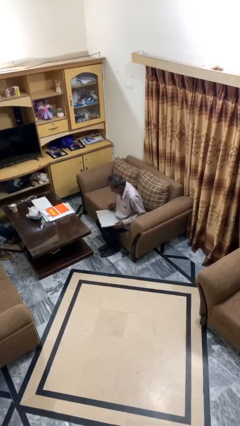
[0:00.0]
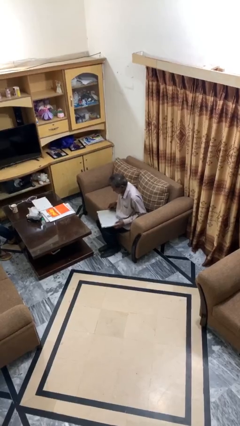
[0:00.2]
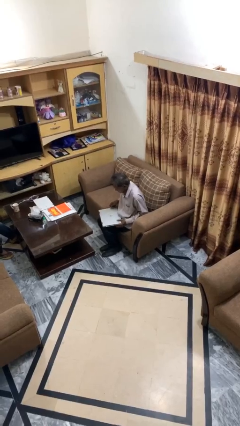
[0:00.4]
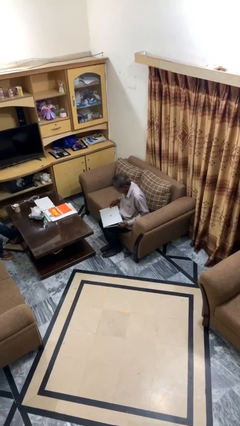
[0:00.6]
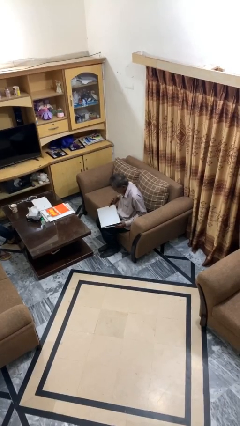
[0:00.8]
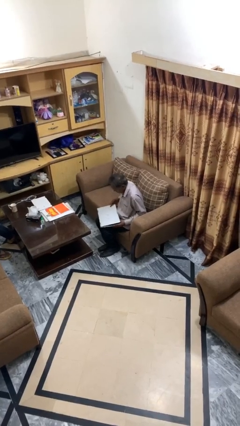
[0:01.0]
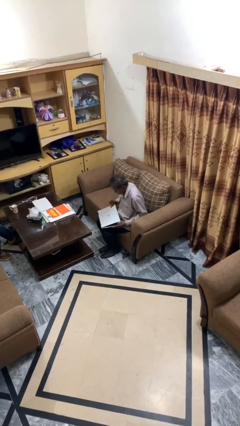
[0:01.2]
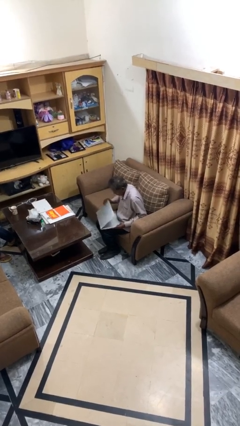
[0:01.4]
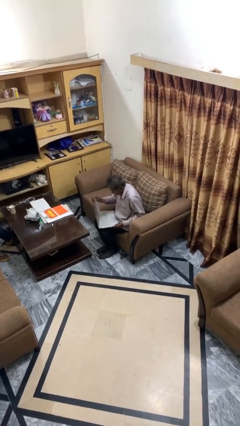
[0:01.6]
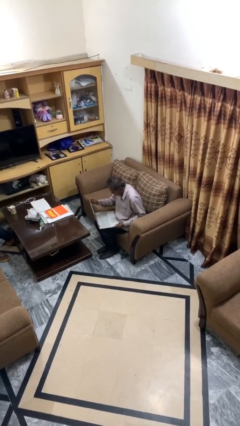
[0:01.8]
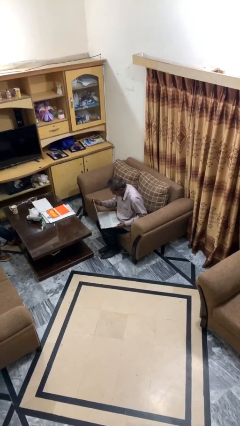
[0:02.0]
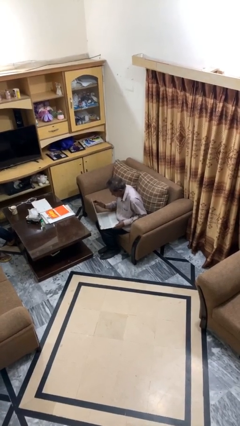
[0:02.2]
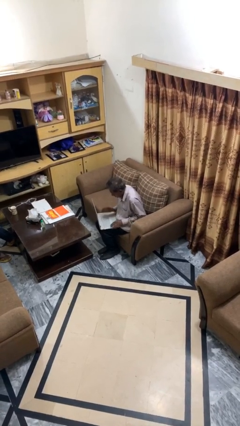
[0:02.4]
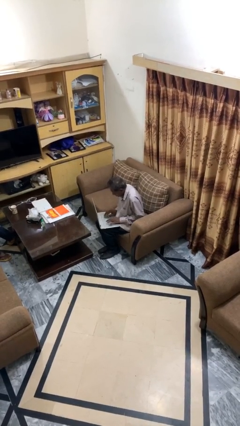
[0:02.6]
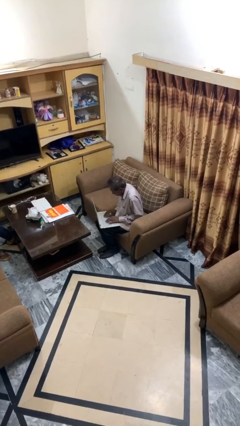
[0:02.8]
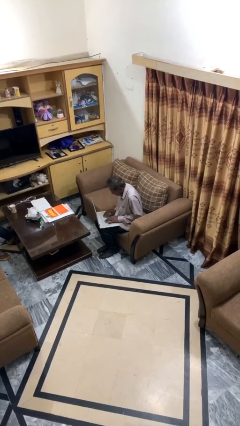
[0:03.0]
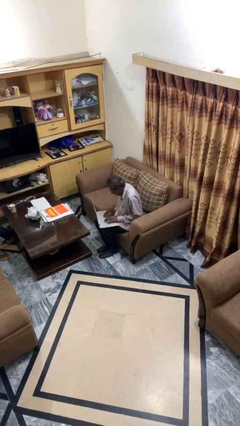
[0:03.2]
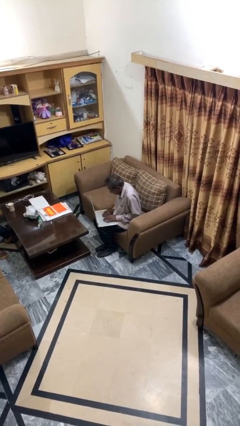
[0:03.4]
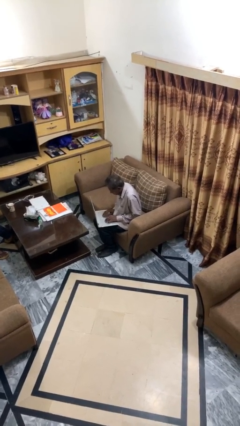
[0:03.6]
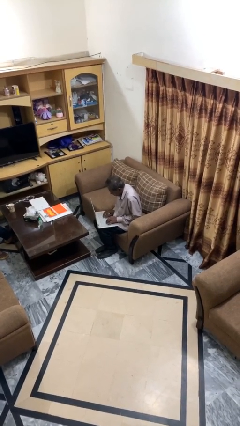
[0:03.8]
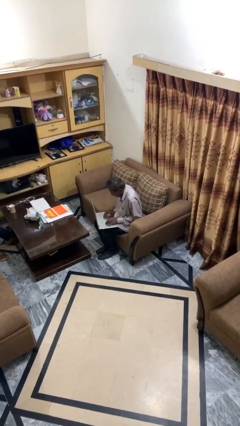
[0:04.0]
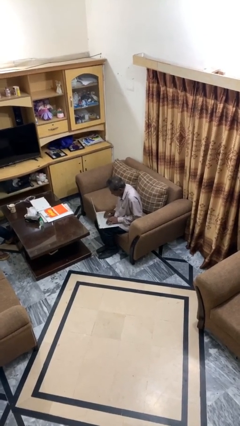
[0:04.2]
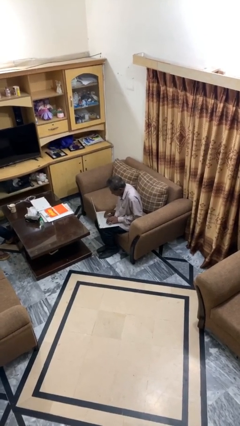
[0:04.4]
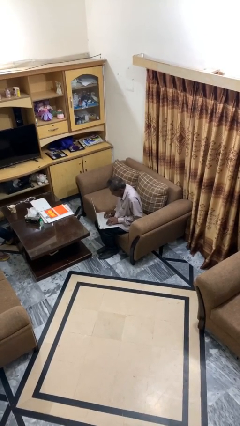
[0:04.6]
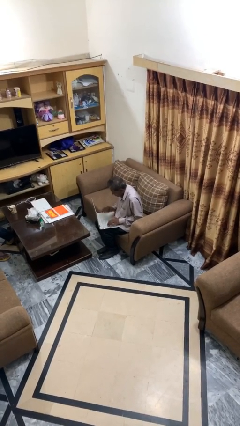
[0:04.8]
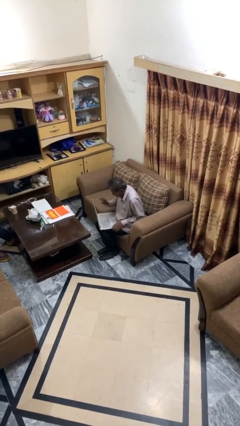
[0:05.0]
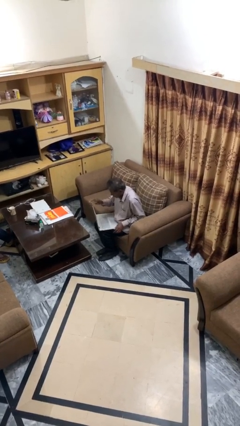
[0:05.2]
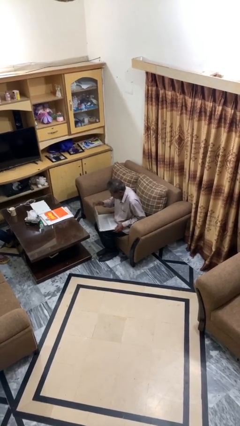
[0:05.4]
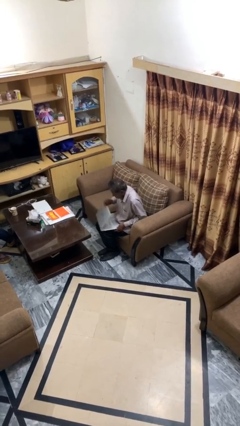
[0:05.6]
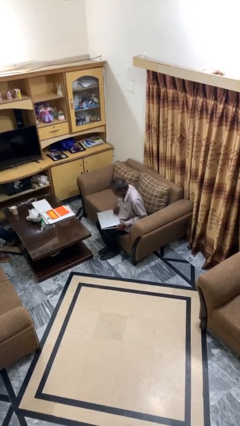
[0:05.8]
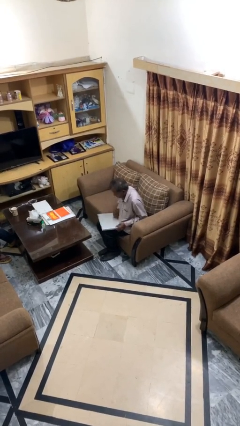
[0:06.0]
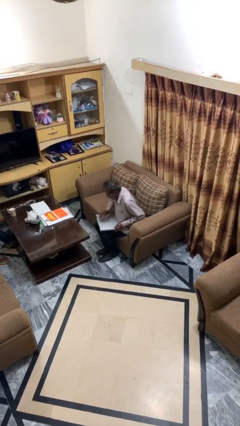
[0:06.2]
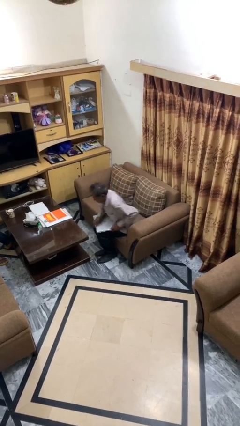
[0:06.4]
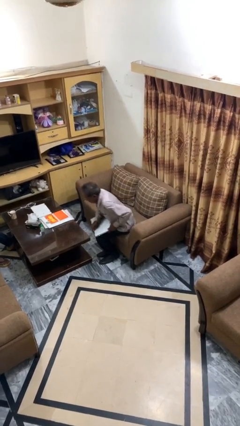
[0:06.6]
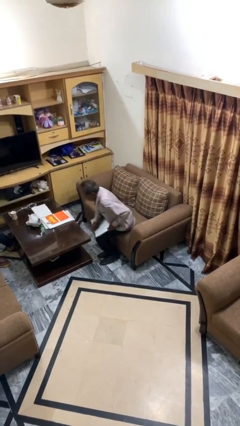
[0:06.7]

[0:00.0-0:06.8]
person interacts with laptop

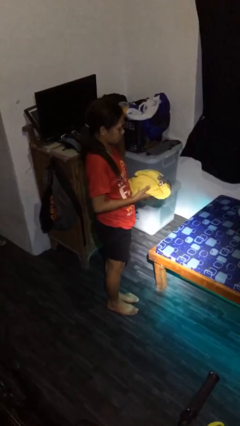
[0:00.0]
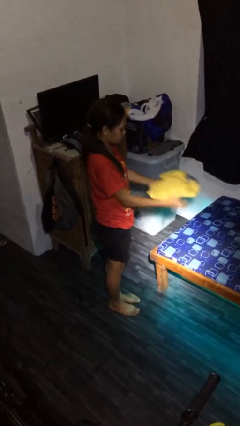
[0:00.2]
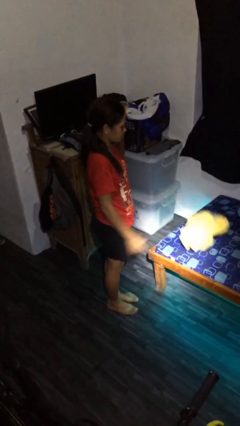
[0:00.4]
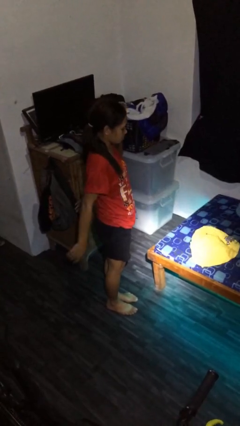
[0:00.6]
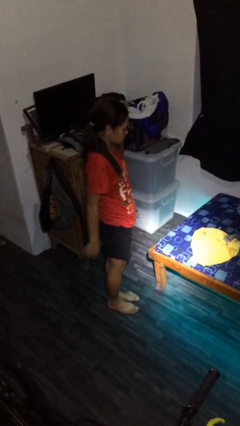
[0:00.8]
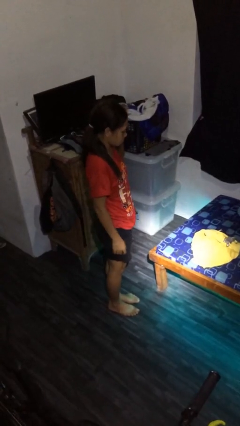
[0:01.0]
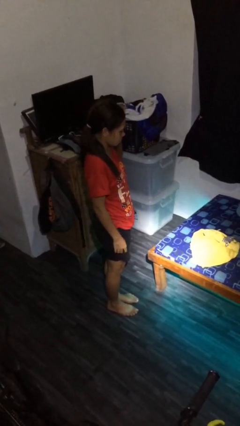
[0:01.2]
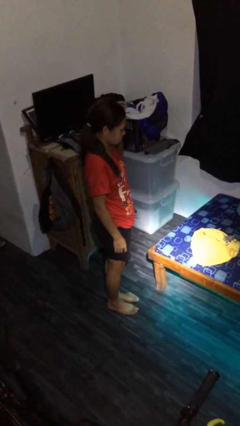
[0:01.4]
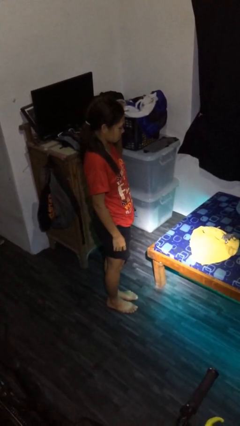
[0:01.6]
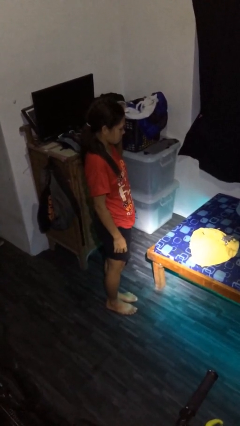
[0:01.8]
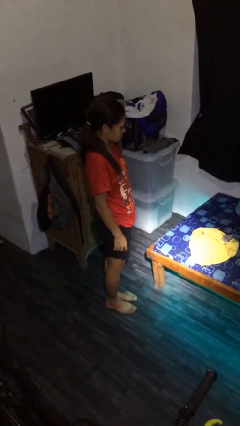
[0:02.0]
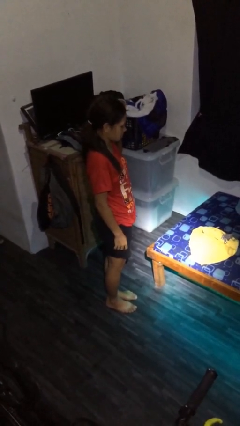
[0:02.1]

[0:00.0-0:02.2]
person throws object on bed

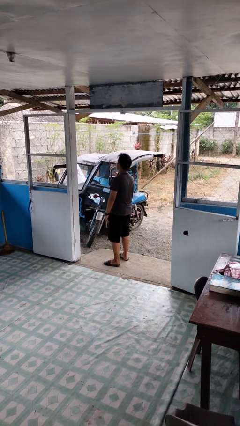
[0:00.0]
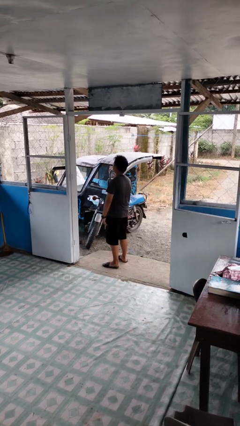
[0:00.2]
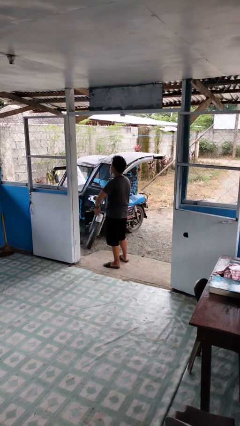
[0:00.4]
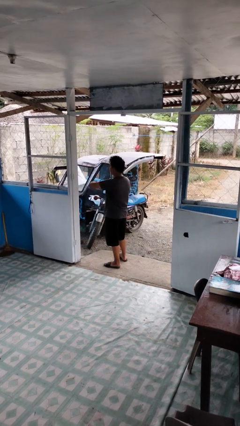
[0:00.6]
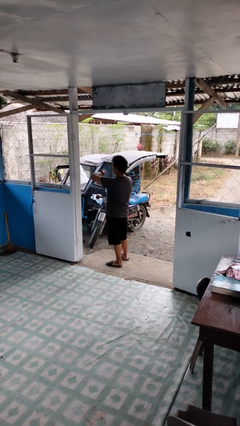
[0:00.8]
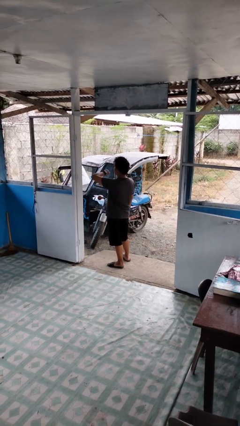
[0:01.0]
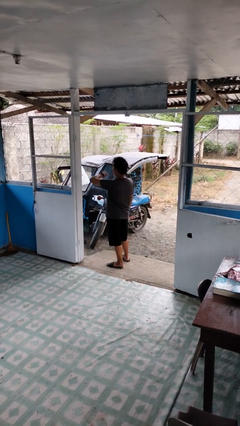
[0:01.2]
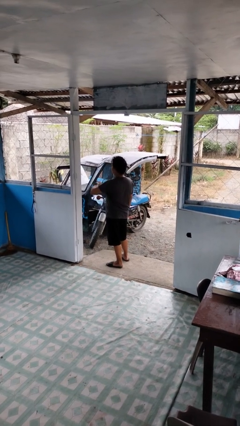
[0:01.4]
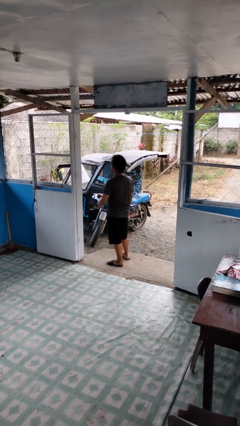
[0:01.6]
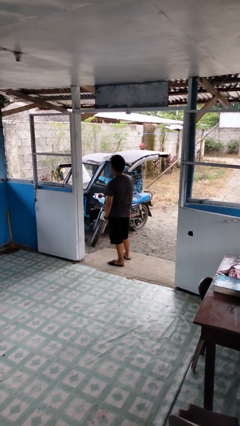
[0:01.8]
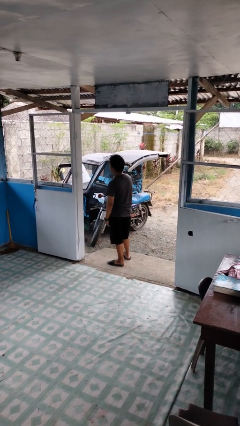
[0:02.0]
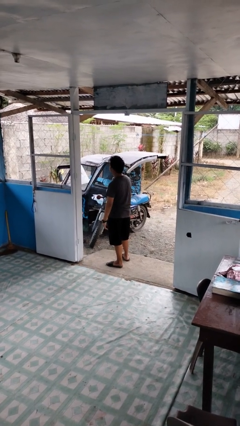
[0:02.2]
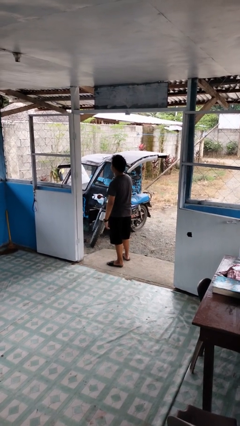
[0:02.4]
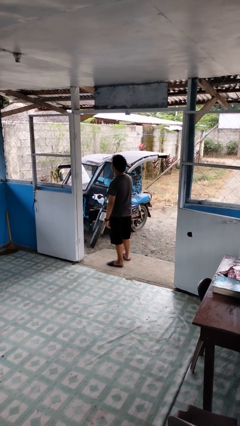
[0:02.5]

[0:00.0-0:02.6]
person looks at wristwatch

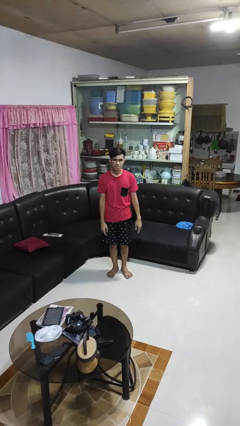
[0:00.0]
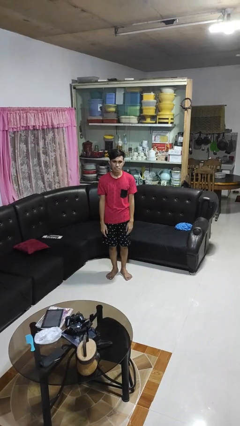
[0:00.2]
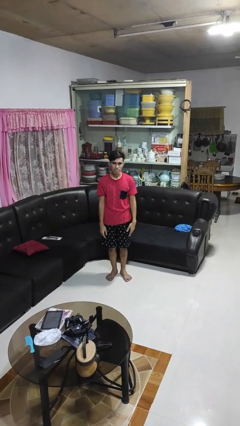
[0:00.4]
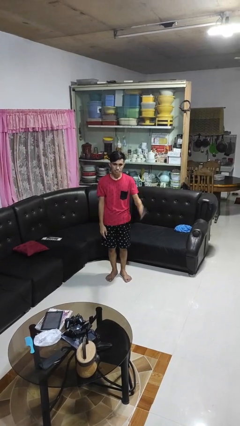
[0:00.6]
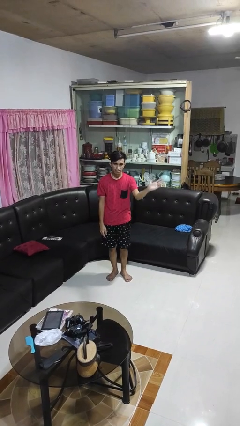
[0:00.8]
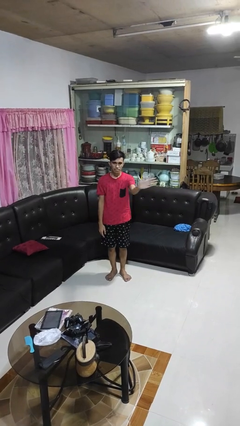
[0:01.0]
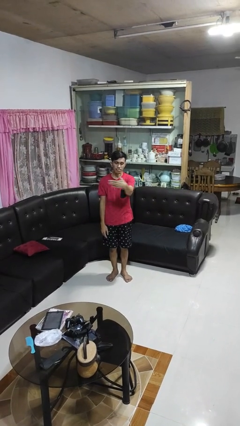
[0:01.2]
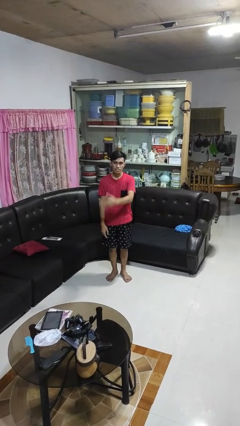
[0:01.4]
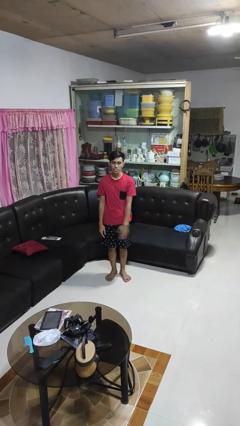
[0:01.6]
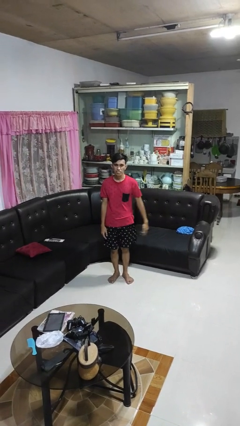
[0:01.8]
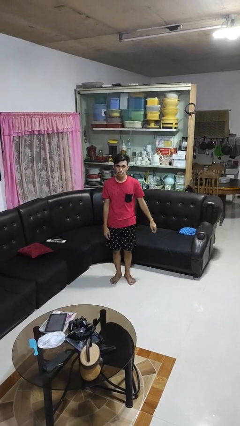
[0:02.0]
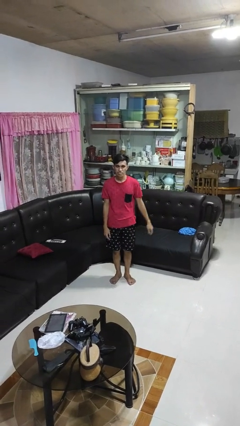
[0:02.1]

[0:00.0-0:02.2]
person gestures swipe right

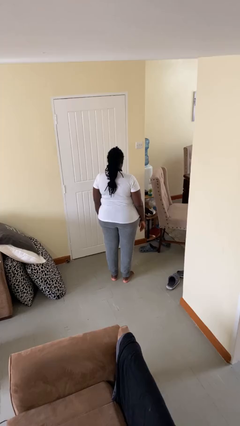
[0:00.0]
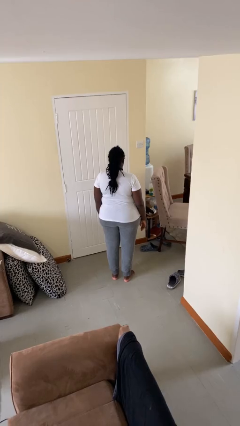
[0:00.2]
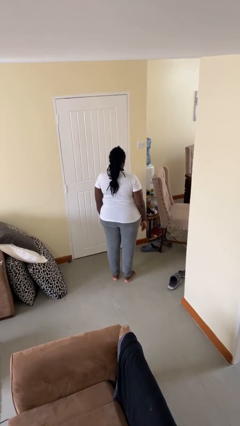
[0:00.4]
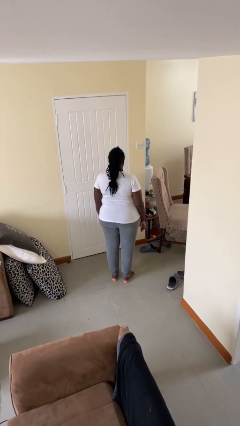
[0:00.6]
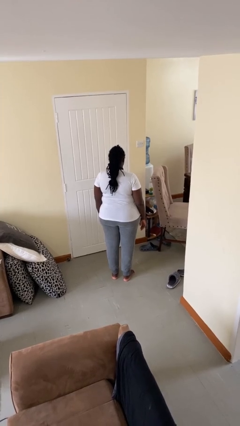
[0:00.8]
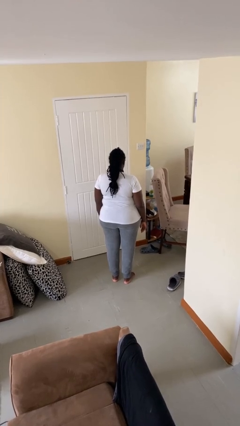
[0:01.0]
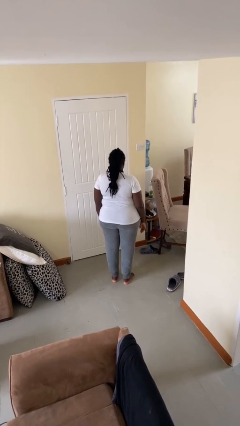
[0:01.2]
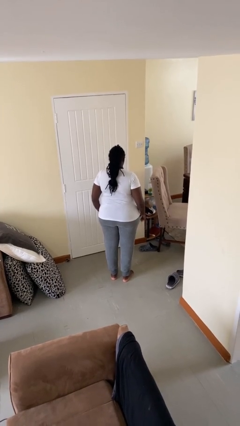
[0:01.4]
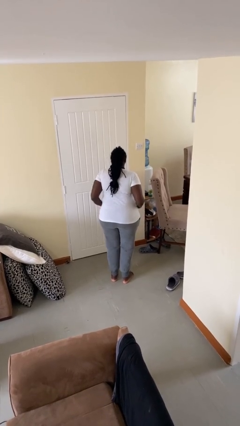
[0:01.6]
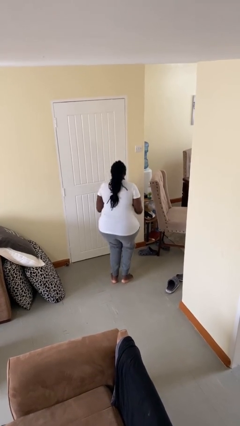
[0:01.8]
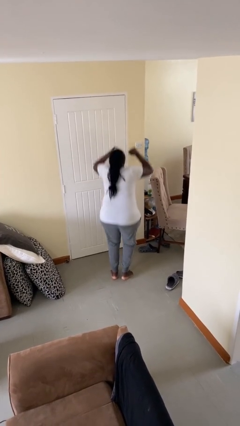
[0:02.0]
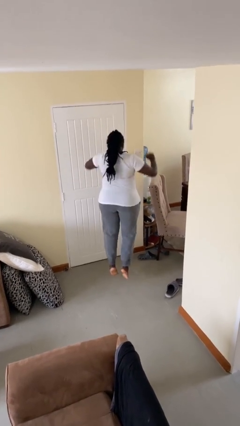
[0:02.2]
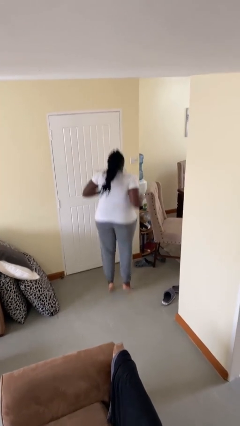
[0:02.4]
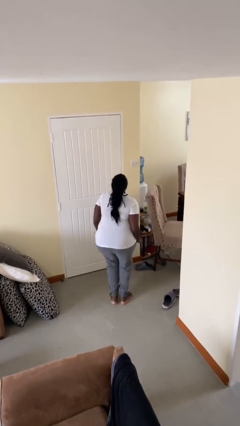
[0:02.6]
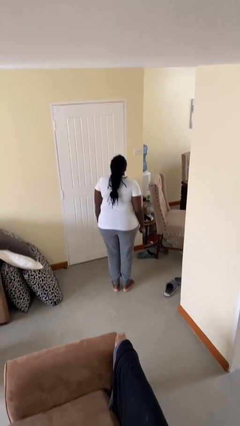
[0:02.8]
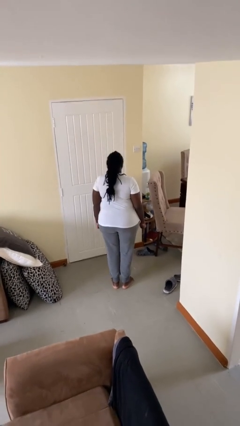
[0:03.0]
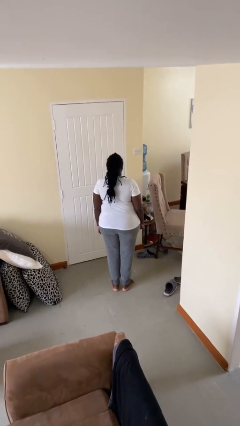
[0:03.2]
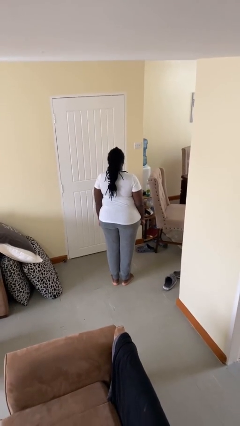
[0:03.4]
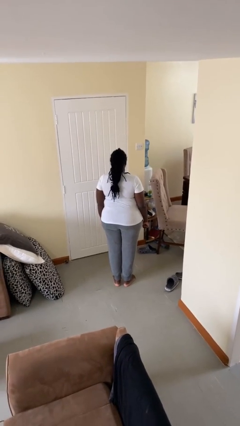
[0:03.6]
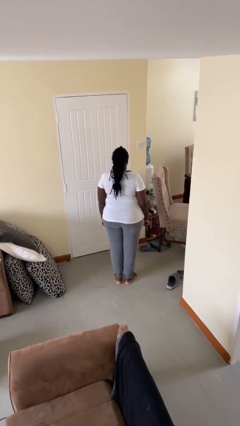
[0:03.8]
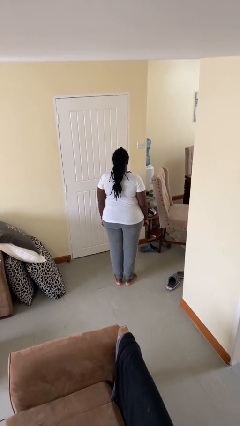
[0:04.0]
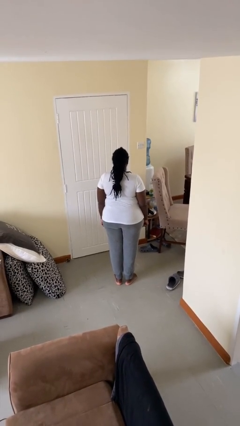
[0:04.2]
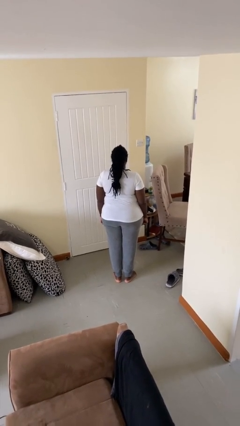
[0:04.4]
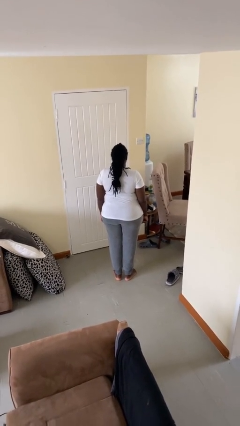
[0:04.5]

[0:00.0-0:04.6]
person jumps
